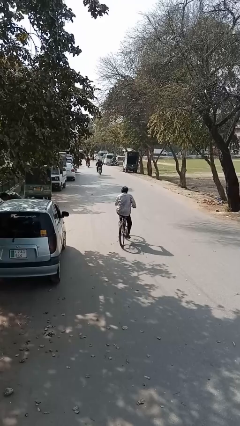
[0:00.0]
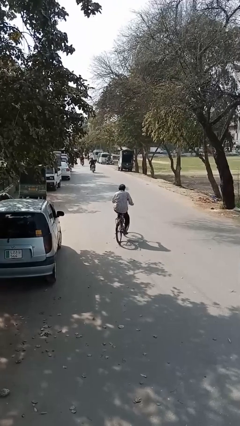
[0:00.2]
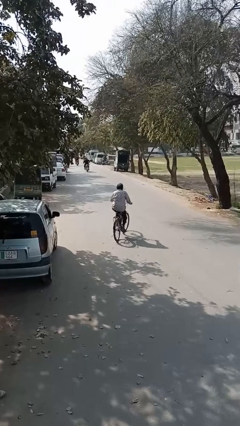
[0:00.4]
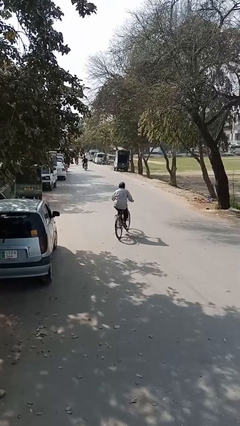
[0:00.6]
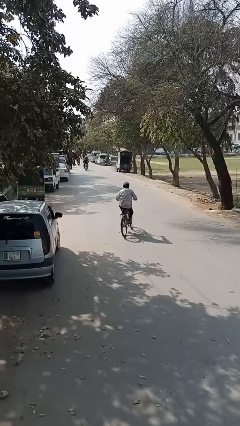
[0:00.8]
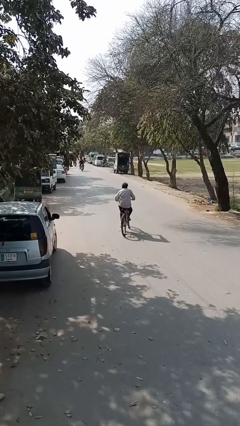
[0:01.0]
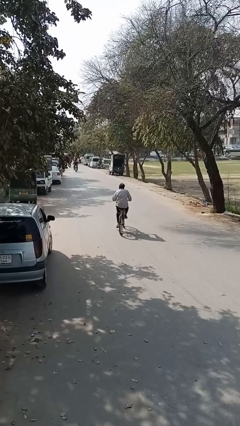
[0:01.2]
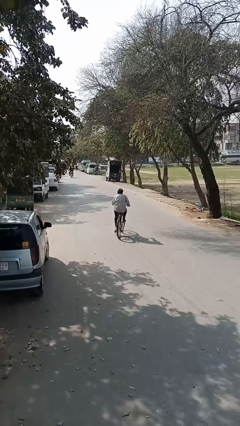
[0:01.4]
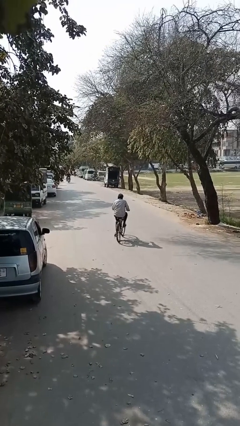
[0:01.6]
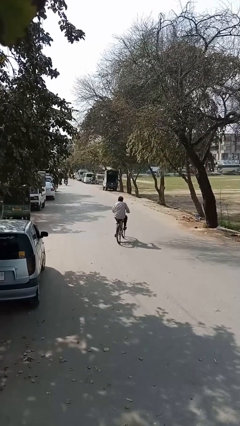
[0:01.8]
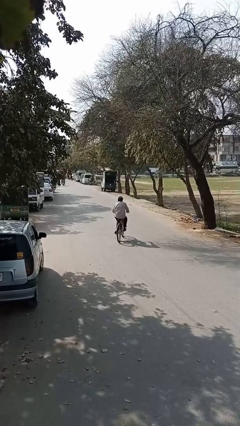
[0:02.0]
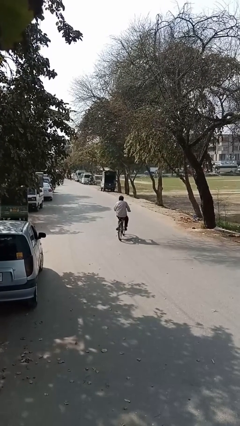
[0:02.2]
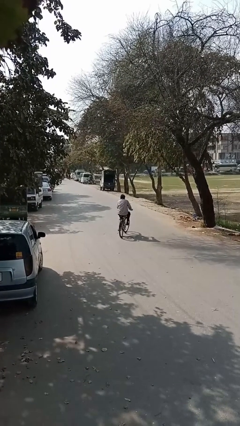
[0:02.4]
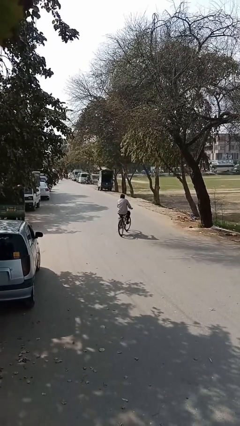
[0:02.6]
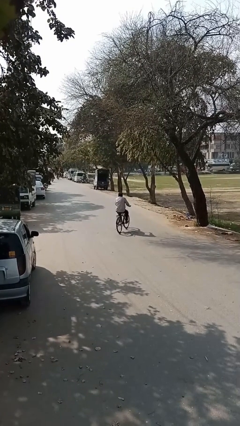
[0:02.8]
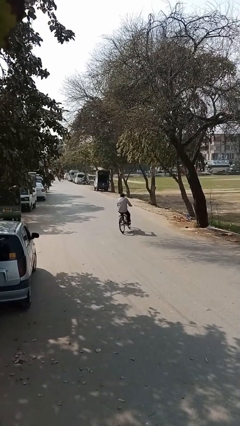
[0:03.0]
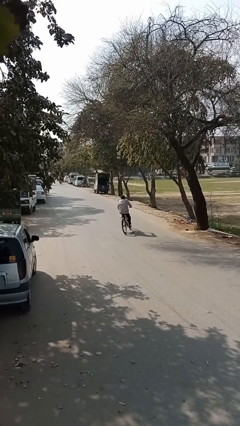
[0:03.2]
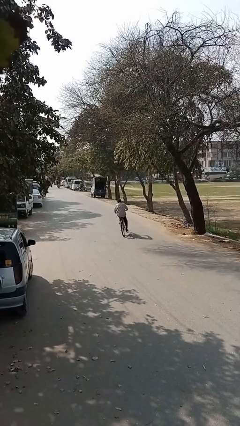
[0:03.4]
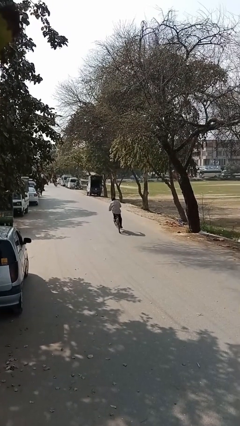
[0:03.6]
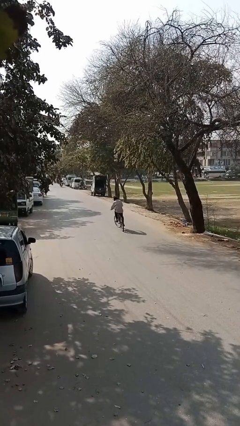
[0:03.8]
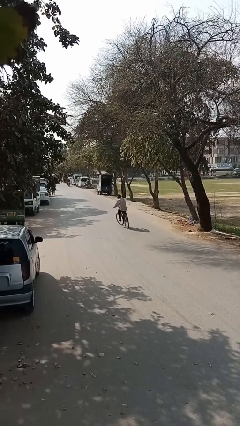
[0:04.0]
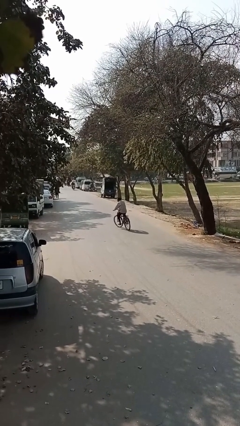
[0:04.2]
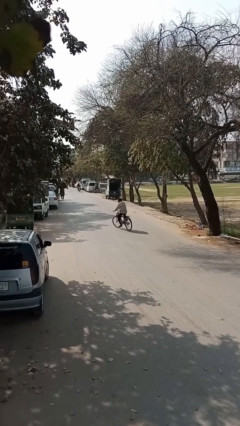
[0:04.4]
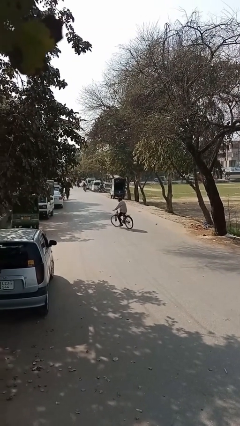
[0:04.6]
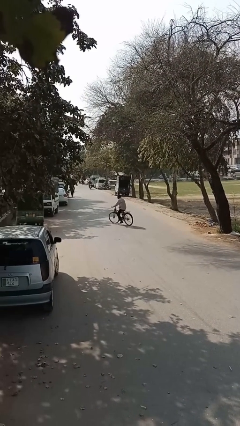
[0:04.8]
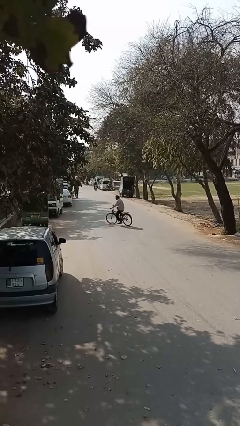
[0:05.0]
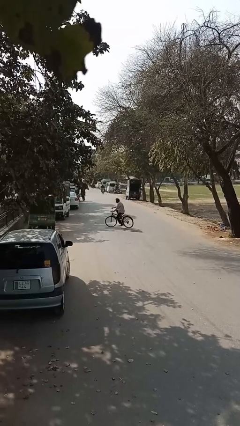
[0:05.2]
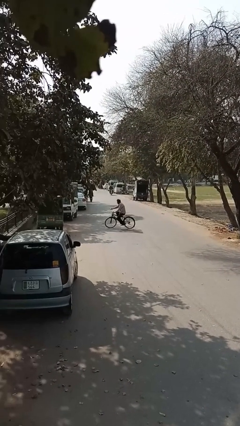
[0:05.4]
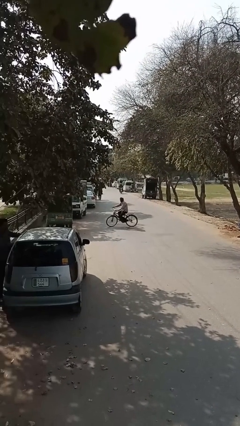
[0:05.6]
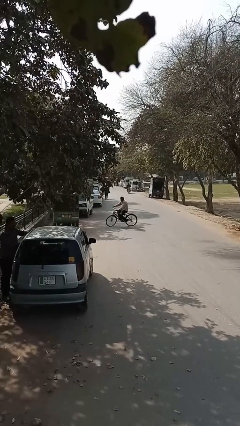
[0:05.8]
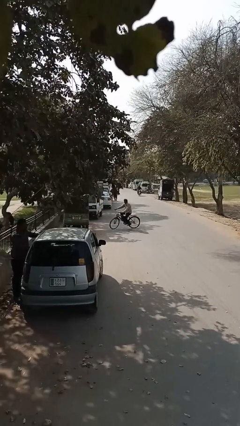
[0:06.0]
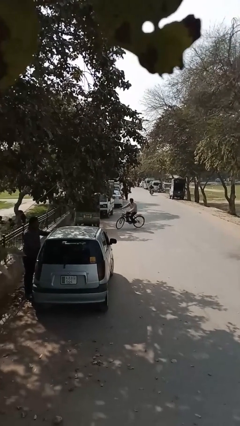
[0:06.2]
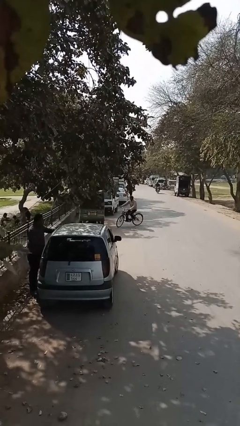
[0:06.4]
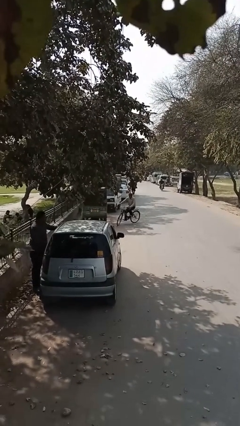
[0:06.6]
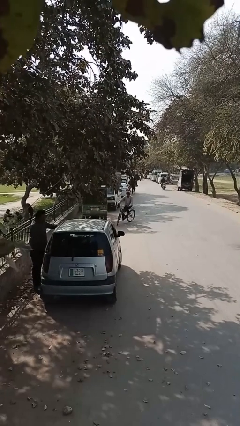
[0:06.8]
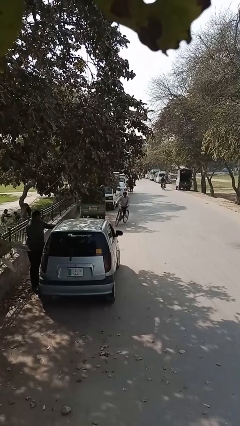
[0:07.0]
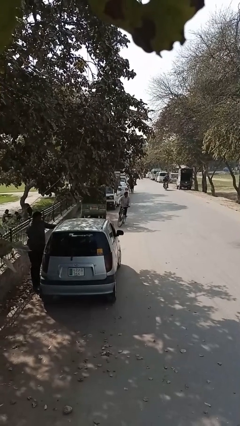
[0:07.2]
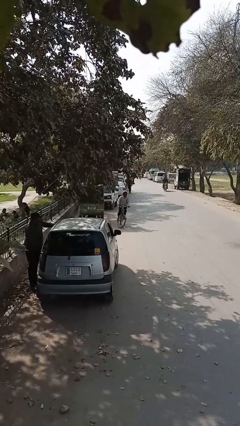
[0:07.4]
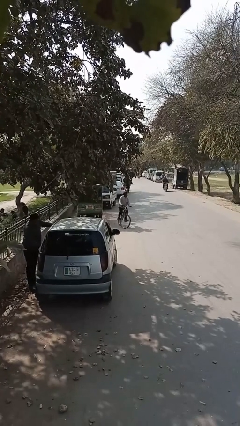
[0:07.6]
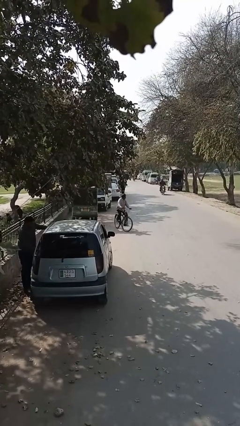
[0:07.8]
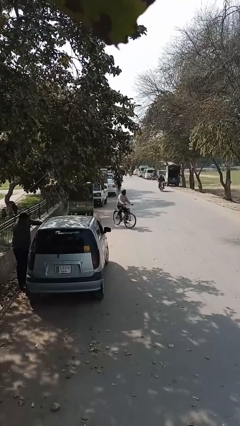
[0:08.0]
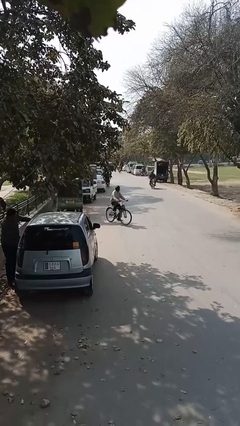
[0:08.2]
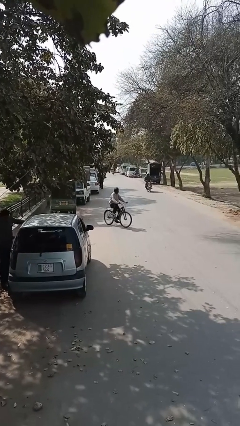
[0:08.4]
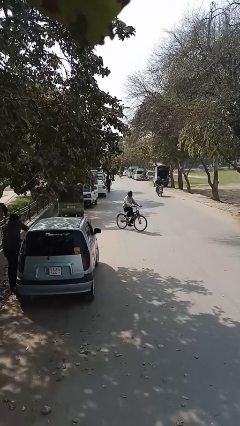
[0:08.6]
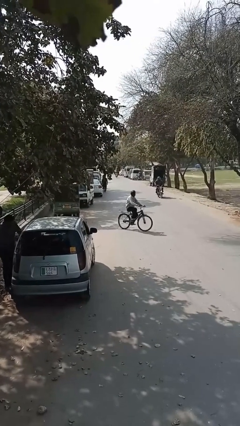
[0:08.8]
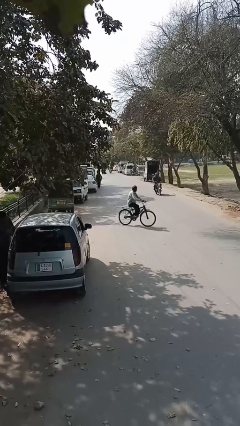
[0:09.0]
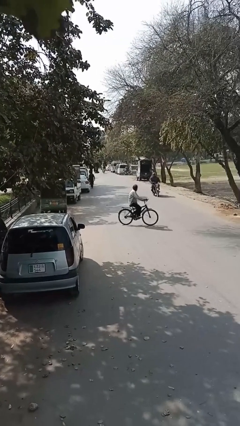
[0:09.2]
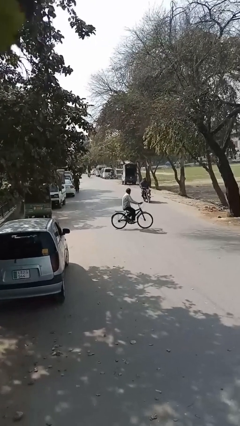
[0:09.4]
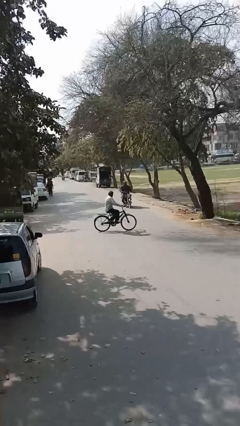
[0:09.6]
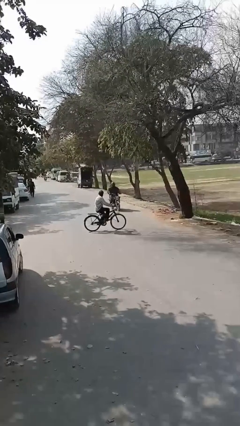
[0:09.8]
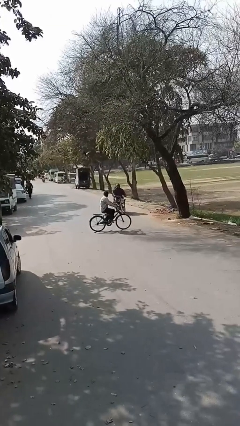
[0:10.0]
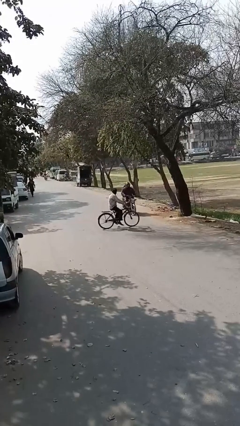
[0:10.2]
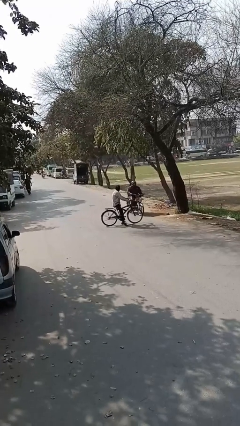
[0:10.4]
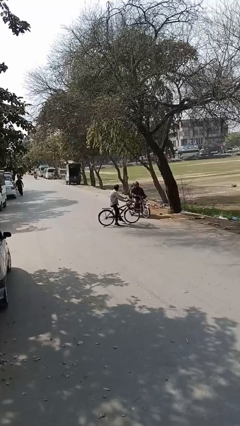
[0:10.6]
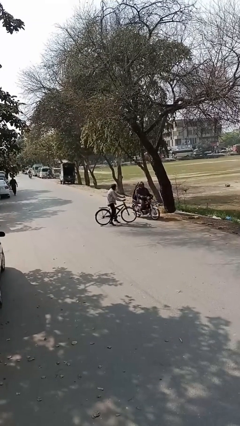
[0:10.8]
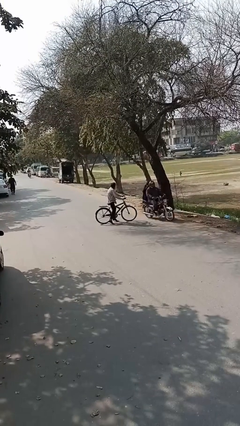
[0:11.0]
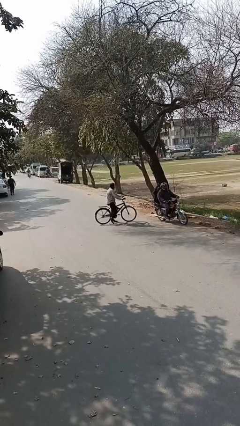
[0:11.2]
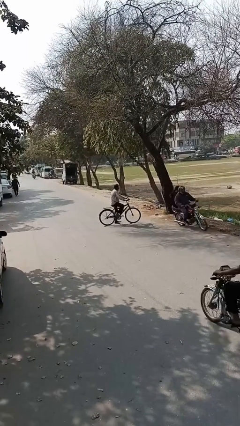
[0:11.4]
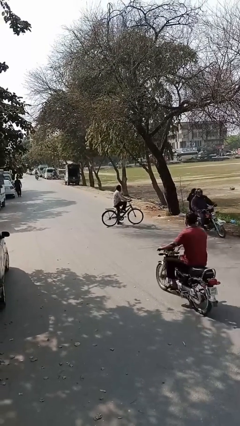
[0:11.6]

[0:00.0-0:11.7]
person rides bicycle

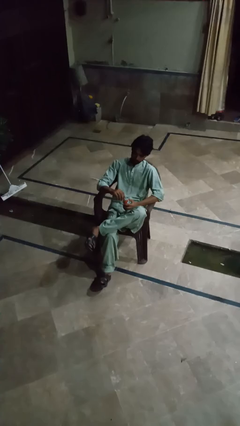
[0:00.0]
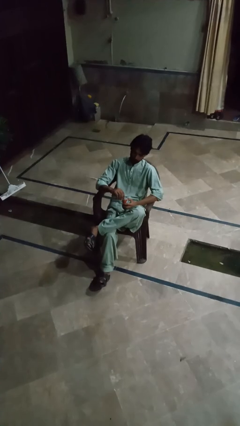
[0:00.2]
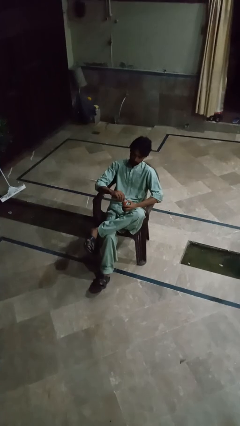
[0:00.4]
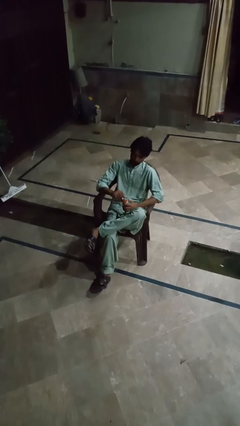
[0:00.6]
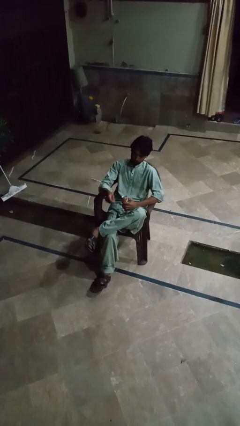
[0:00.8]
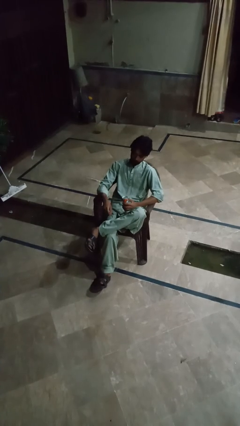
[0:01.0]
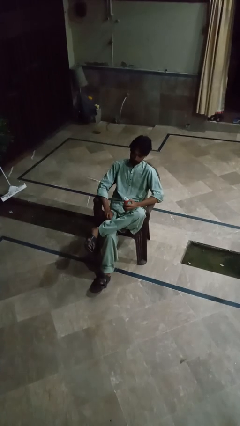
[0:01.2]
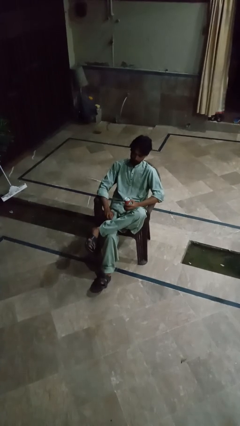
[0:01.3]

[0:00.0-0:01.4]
person opens can with can opener

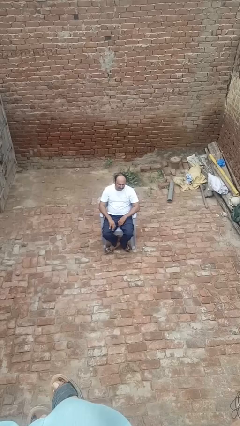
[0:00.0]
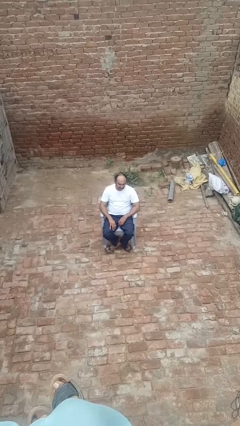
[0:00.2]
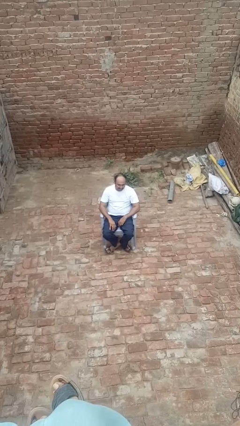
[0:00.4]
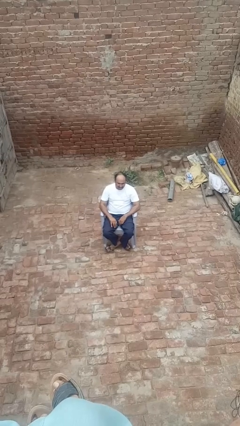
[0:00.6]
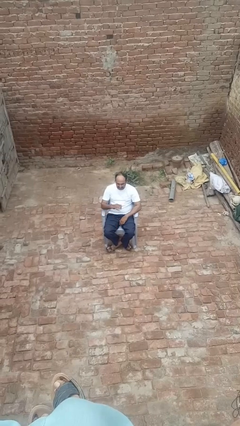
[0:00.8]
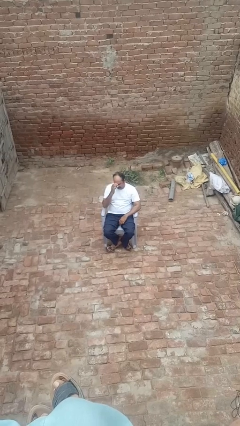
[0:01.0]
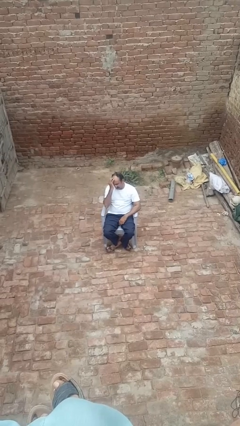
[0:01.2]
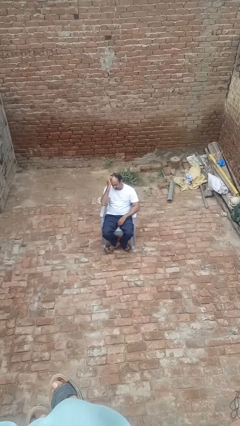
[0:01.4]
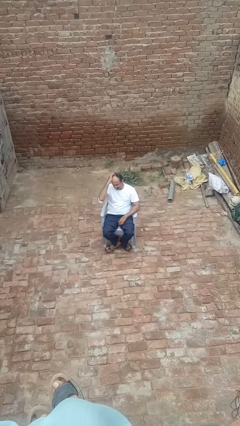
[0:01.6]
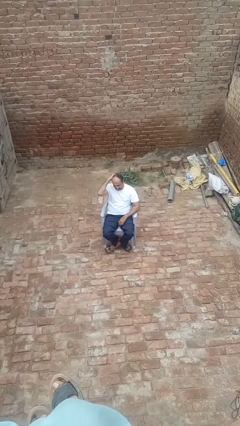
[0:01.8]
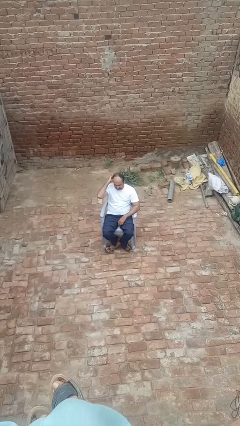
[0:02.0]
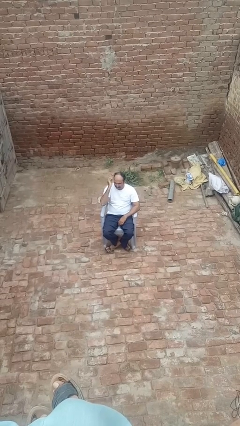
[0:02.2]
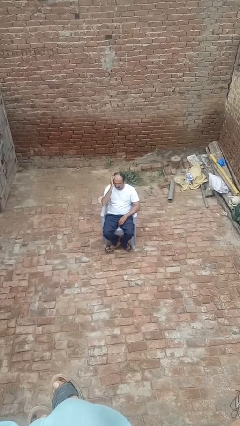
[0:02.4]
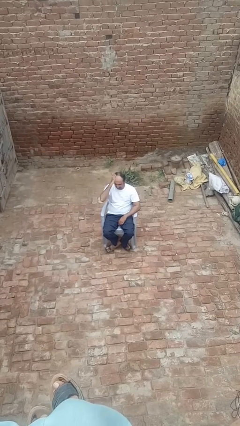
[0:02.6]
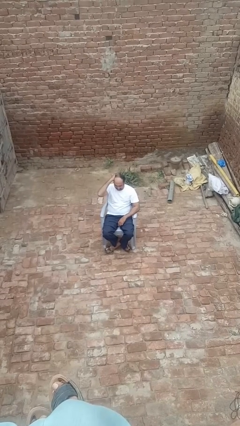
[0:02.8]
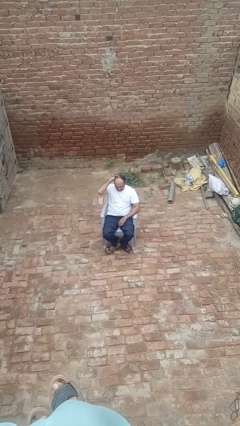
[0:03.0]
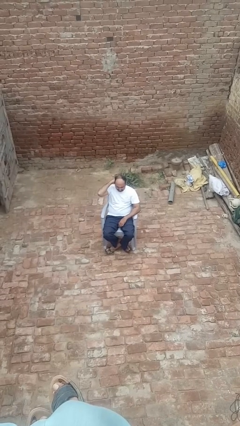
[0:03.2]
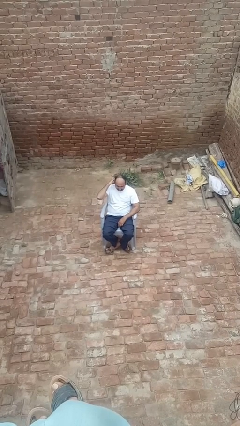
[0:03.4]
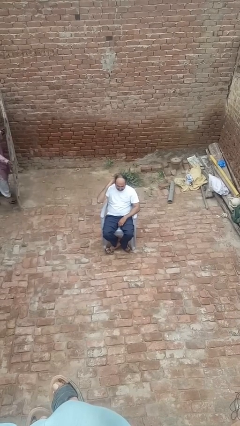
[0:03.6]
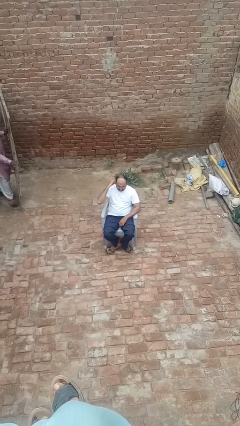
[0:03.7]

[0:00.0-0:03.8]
person strokes hair

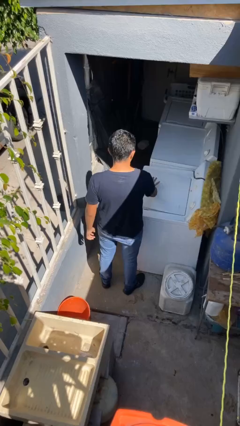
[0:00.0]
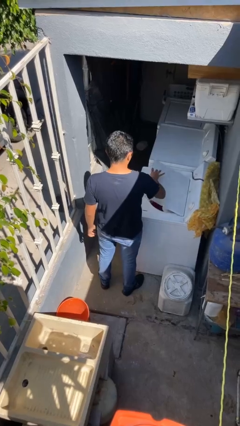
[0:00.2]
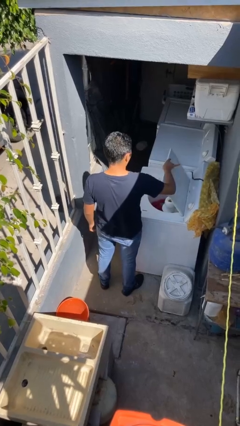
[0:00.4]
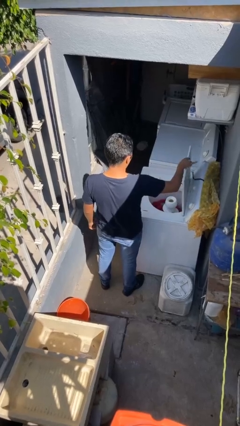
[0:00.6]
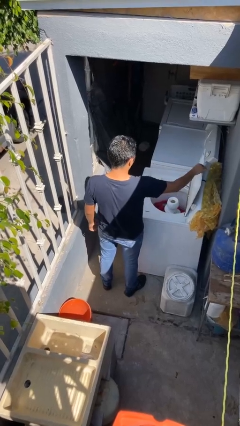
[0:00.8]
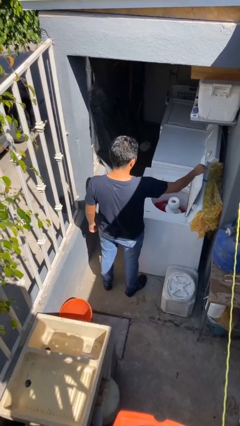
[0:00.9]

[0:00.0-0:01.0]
person opens clothes washer
